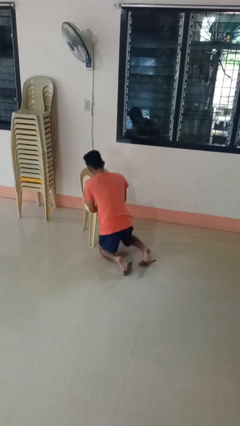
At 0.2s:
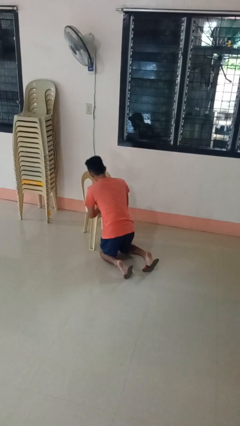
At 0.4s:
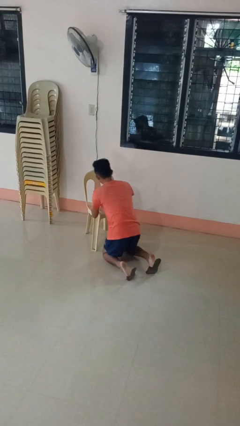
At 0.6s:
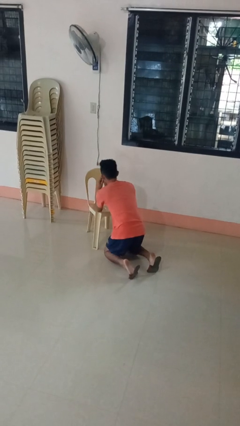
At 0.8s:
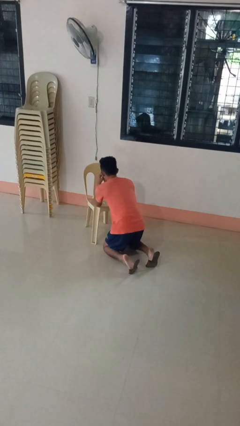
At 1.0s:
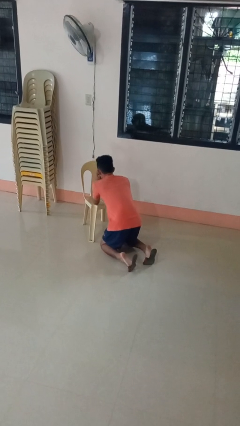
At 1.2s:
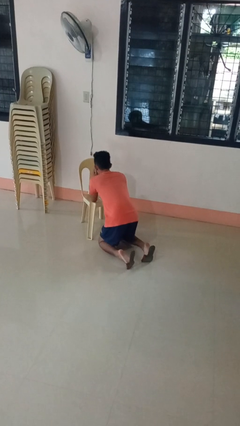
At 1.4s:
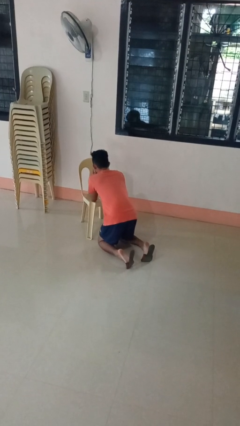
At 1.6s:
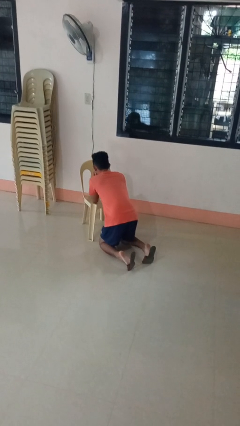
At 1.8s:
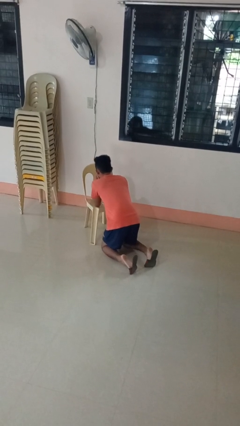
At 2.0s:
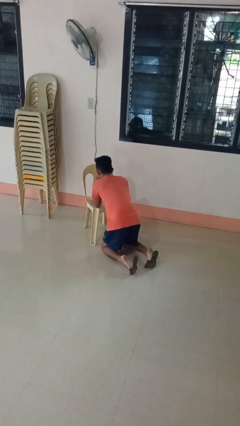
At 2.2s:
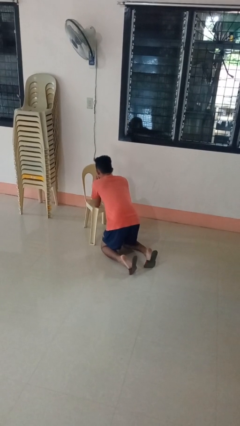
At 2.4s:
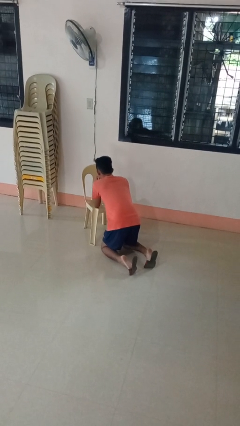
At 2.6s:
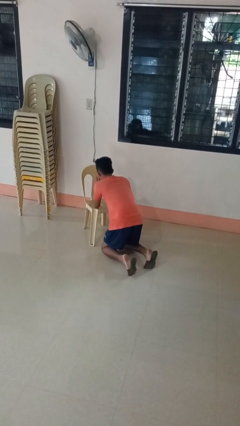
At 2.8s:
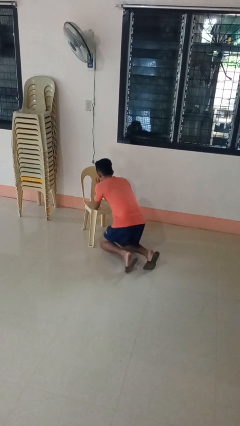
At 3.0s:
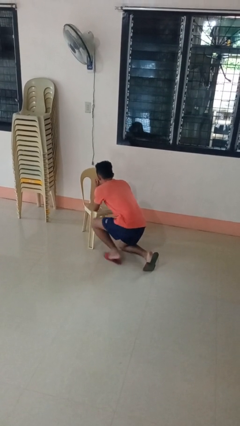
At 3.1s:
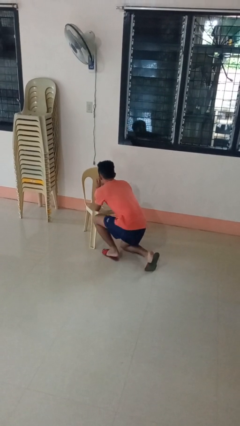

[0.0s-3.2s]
person prays

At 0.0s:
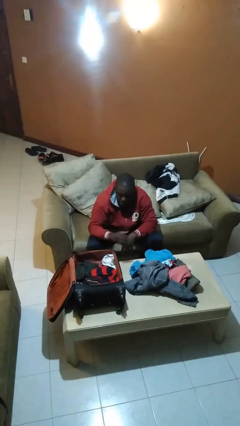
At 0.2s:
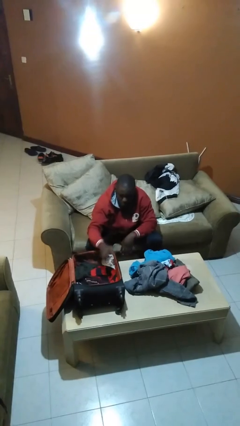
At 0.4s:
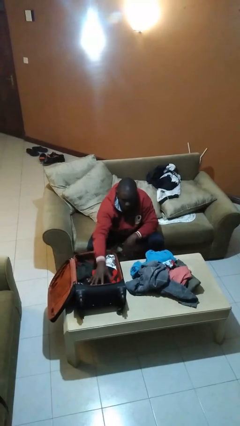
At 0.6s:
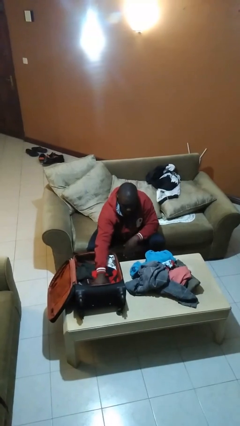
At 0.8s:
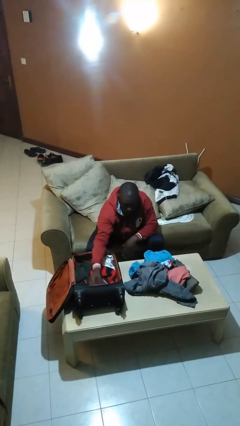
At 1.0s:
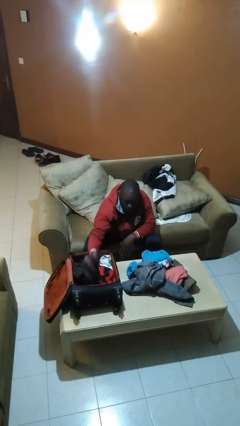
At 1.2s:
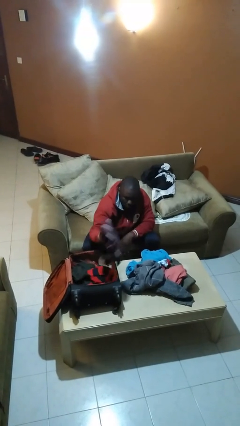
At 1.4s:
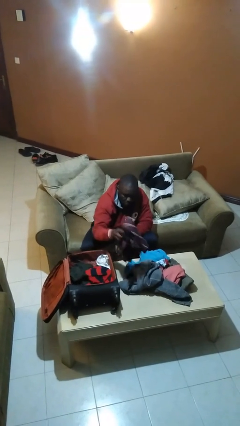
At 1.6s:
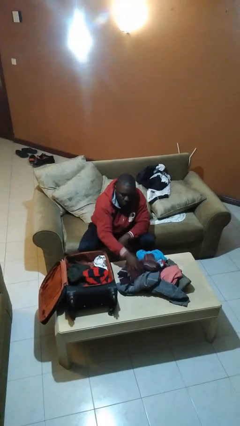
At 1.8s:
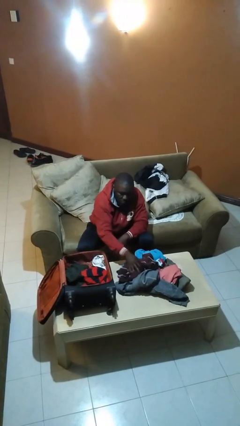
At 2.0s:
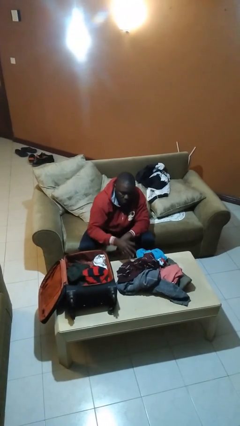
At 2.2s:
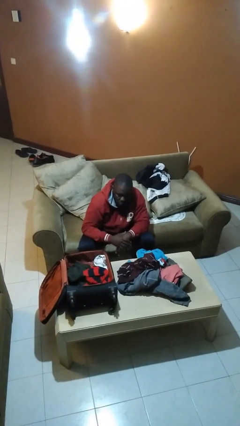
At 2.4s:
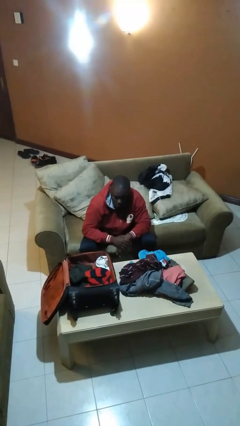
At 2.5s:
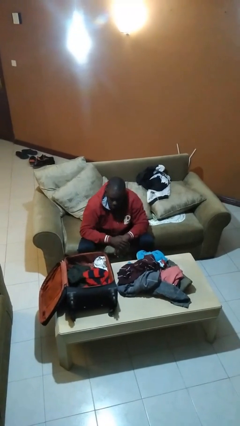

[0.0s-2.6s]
person unloads clothes from suitcase

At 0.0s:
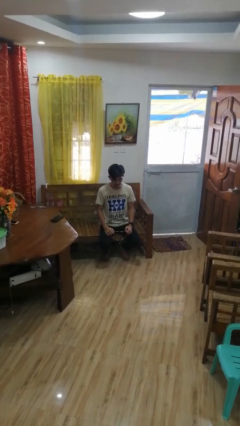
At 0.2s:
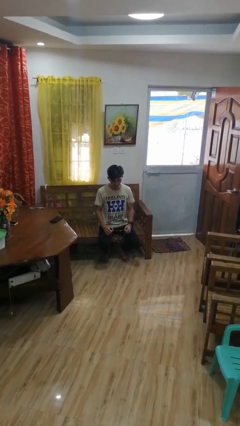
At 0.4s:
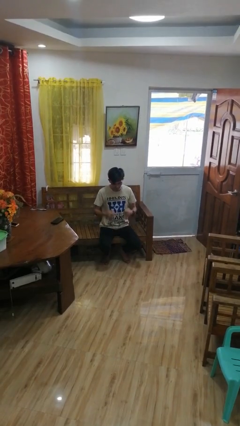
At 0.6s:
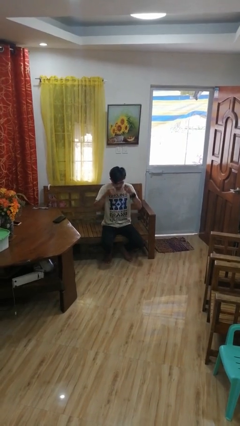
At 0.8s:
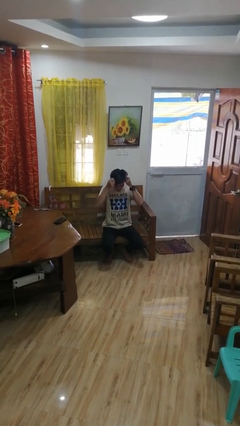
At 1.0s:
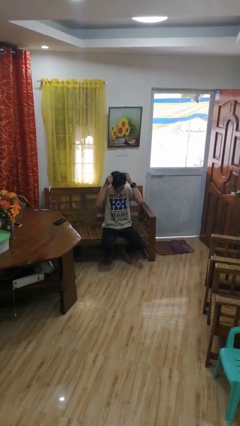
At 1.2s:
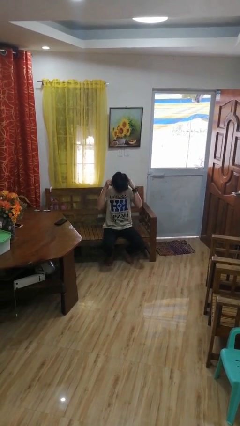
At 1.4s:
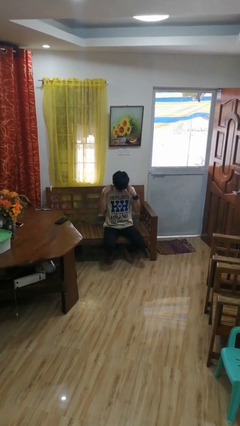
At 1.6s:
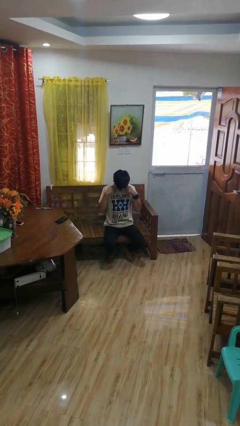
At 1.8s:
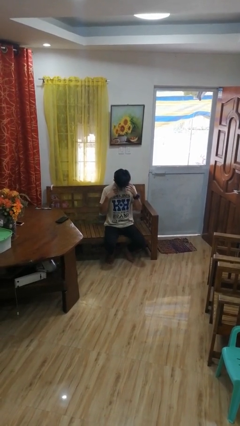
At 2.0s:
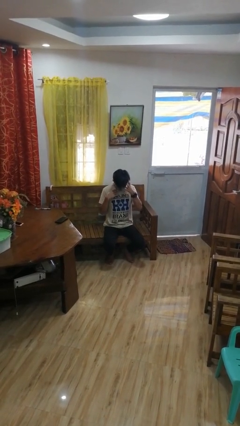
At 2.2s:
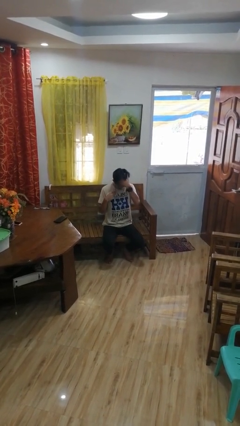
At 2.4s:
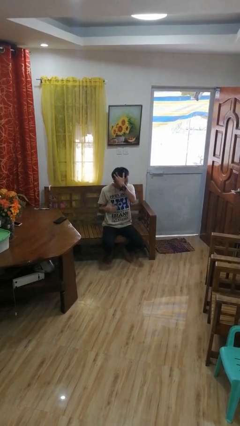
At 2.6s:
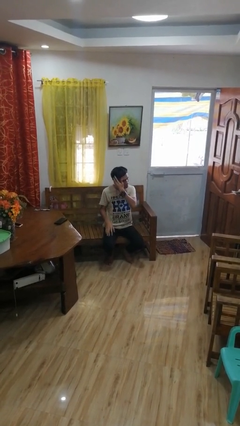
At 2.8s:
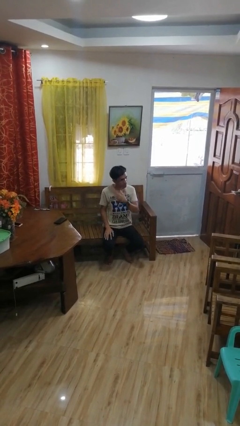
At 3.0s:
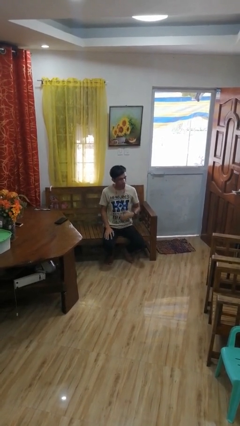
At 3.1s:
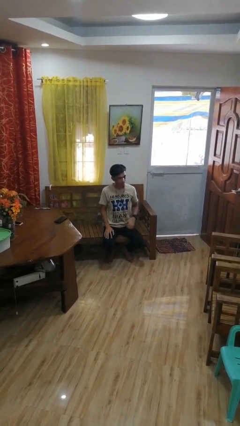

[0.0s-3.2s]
person puts on necklace

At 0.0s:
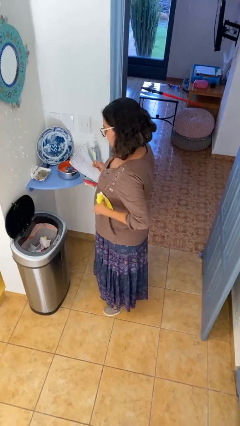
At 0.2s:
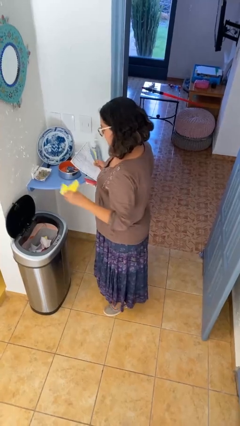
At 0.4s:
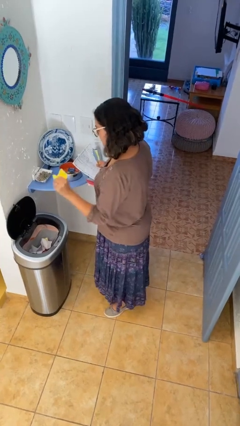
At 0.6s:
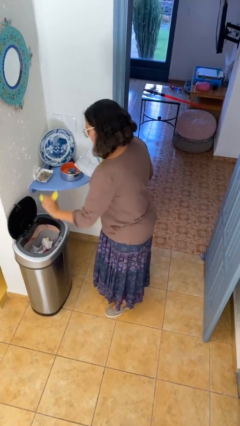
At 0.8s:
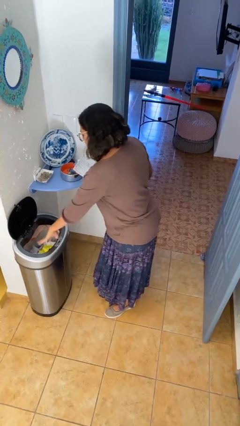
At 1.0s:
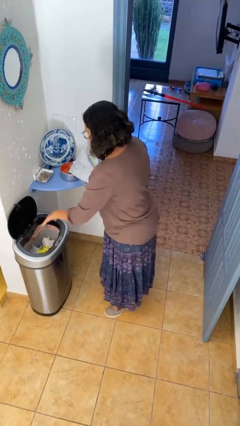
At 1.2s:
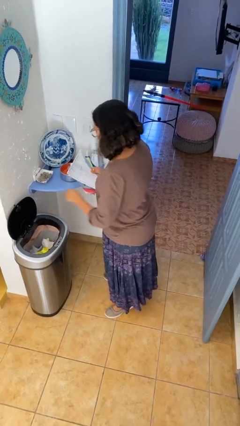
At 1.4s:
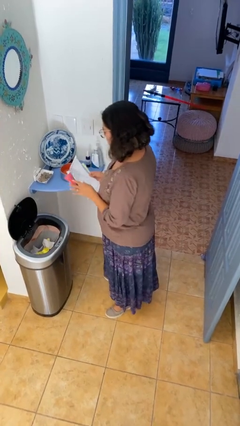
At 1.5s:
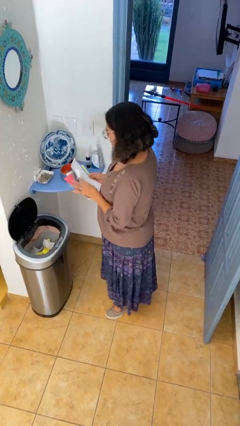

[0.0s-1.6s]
person discards trash

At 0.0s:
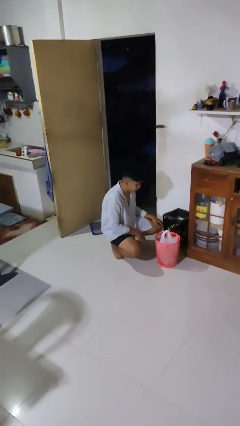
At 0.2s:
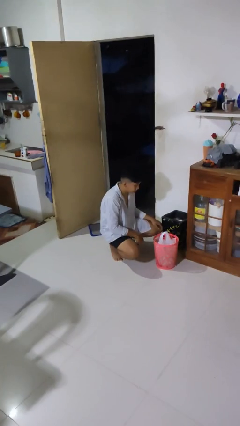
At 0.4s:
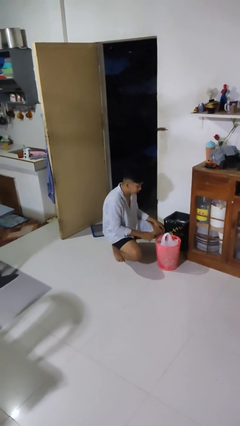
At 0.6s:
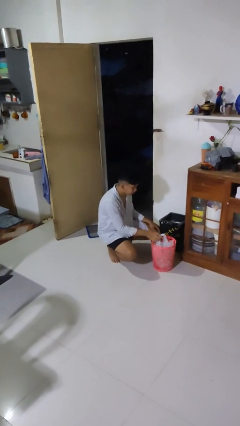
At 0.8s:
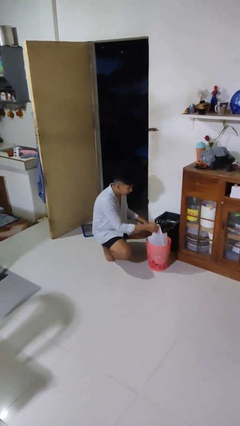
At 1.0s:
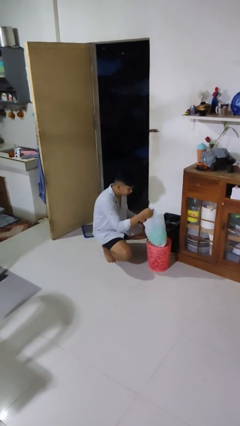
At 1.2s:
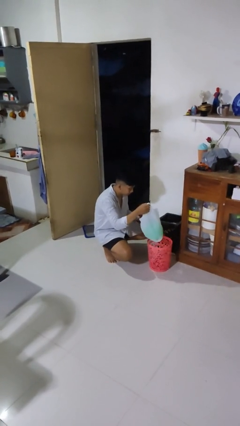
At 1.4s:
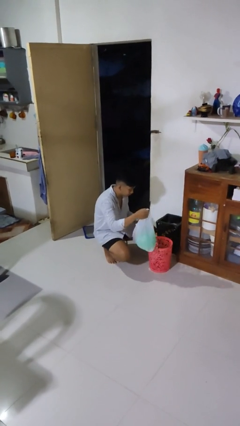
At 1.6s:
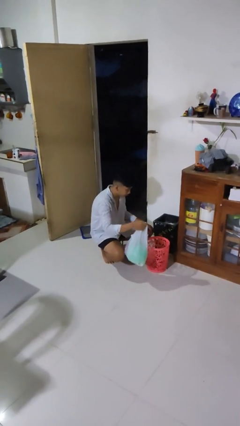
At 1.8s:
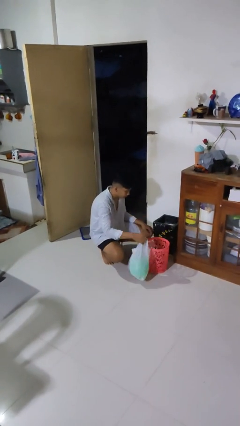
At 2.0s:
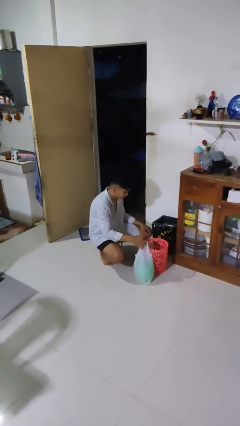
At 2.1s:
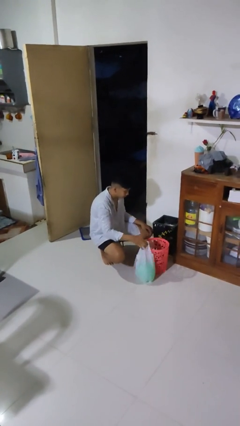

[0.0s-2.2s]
person removes trashbag from trashcan

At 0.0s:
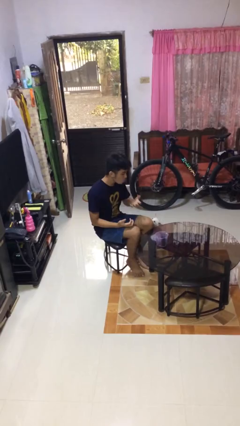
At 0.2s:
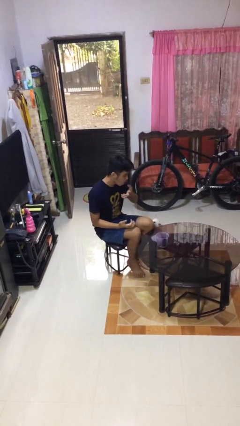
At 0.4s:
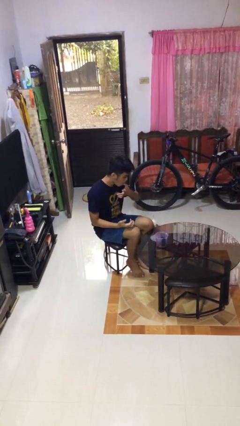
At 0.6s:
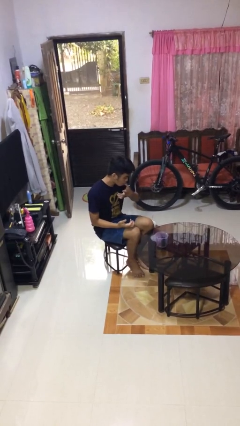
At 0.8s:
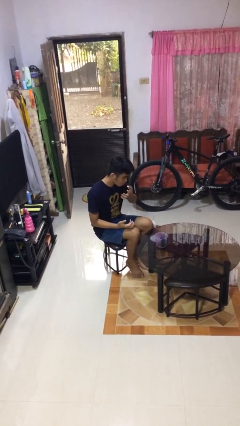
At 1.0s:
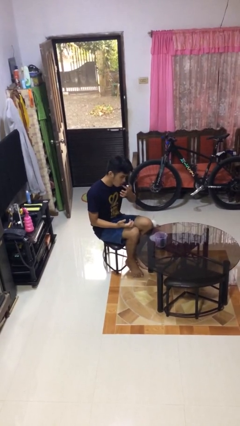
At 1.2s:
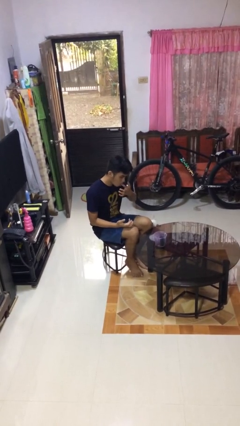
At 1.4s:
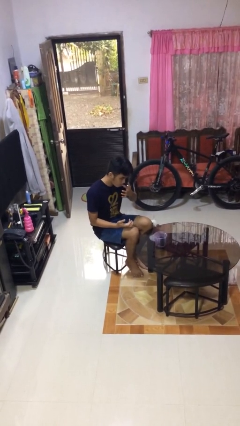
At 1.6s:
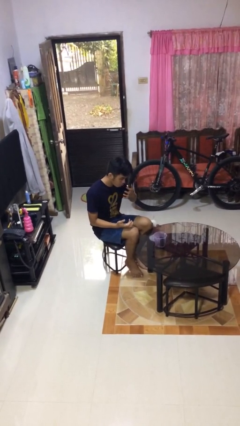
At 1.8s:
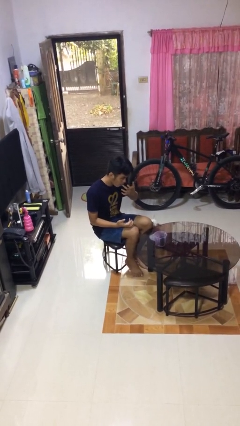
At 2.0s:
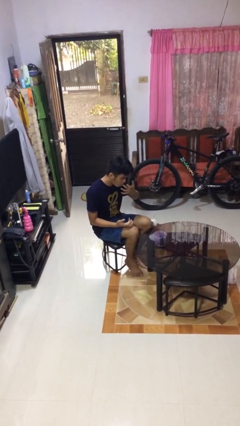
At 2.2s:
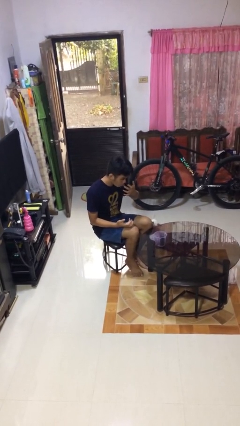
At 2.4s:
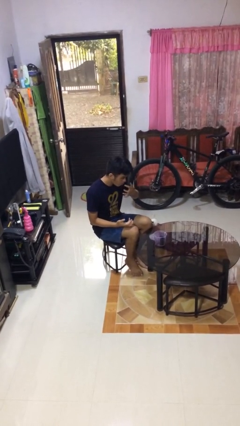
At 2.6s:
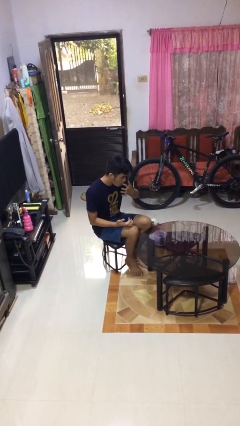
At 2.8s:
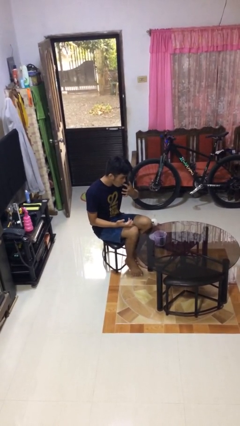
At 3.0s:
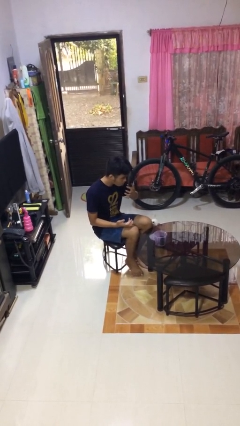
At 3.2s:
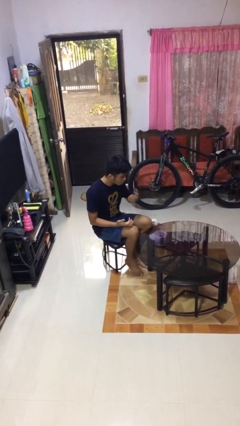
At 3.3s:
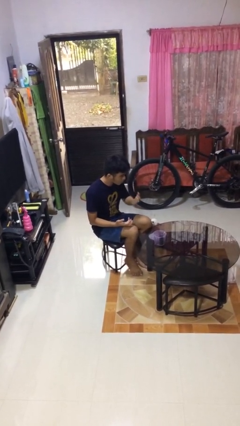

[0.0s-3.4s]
person licks fingers

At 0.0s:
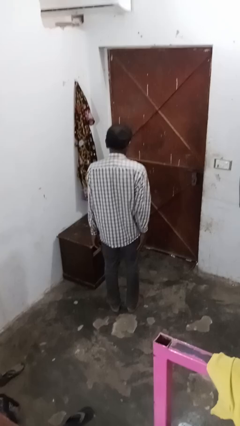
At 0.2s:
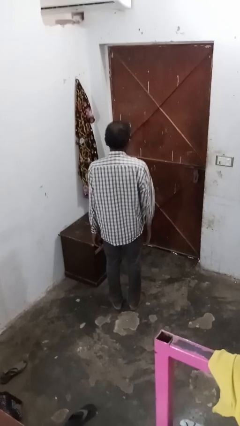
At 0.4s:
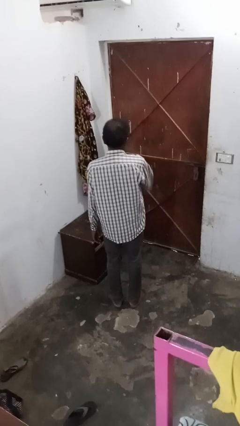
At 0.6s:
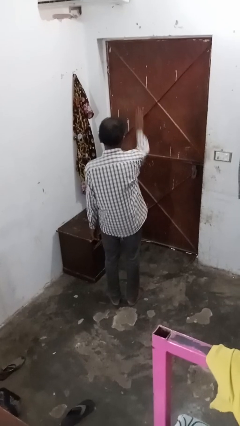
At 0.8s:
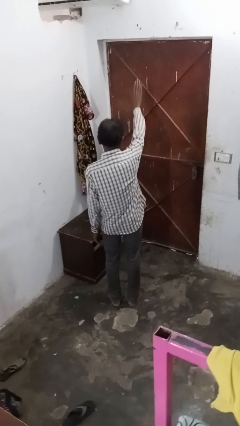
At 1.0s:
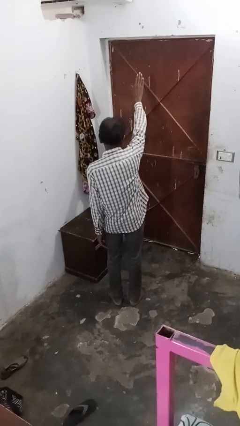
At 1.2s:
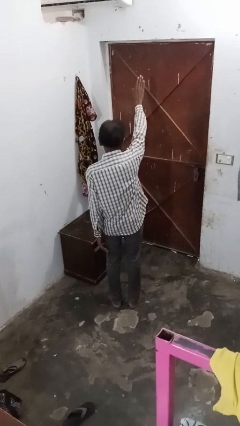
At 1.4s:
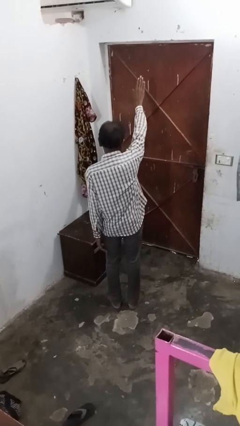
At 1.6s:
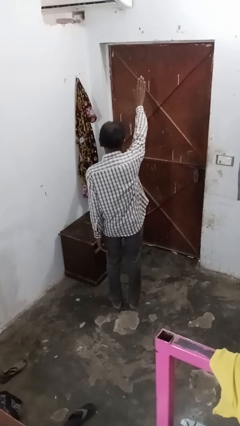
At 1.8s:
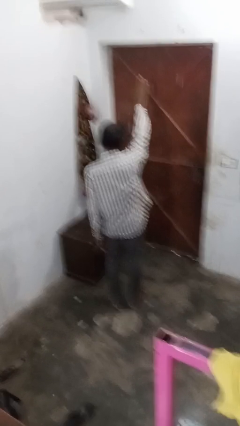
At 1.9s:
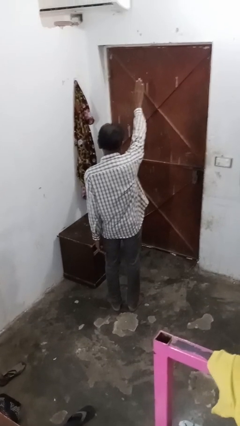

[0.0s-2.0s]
person gestures stop
